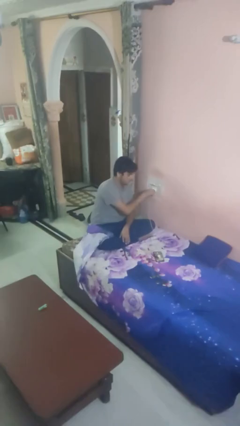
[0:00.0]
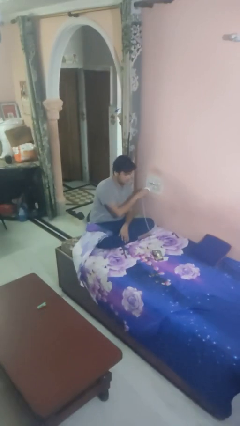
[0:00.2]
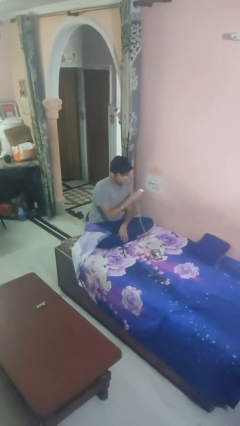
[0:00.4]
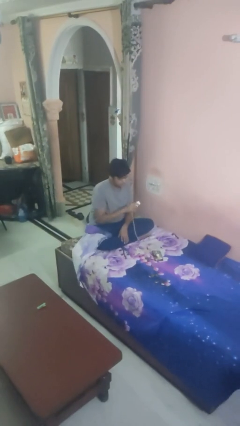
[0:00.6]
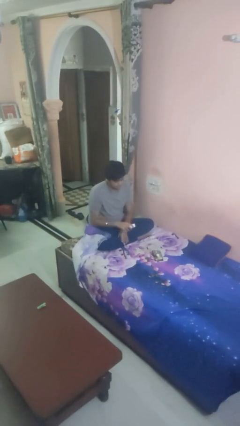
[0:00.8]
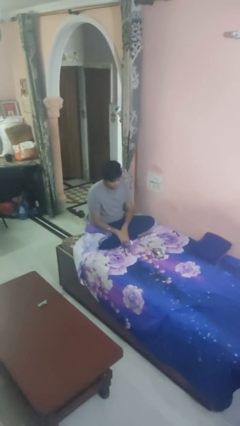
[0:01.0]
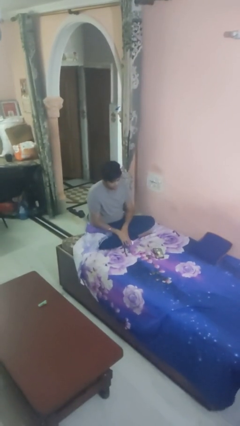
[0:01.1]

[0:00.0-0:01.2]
person unplugs from electrical socket

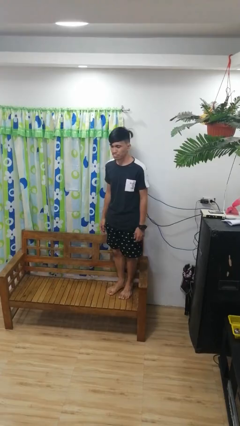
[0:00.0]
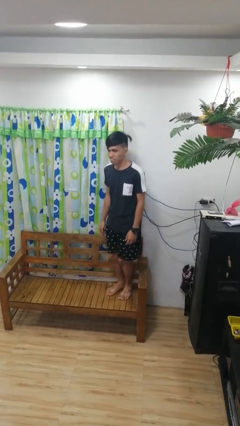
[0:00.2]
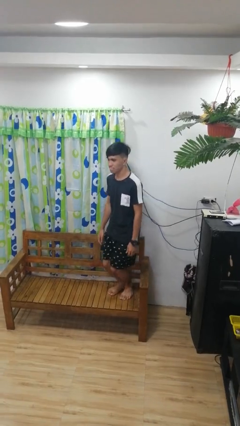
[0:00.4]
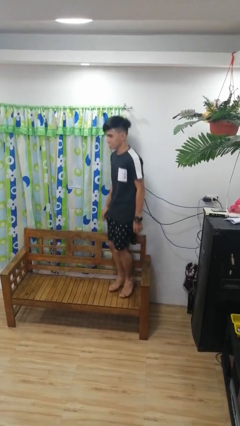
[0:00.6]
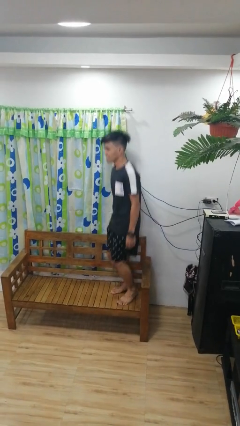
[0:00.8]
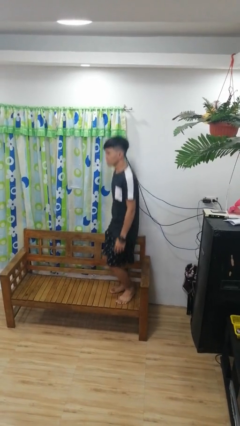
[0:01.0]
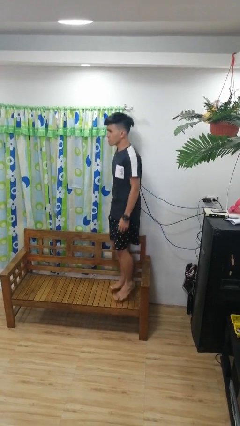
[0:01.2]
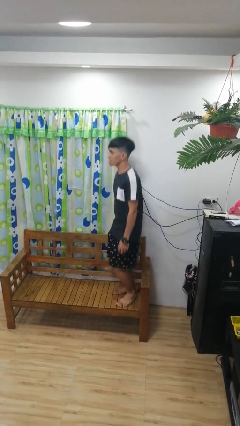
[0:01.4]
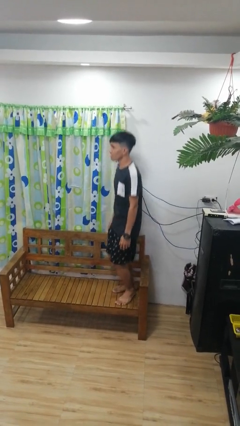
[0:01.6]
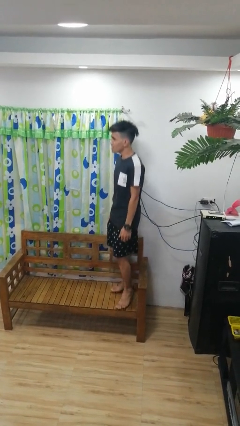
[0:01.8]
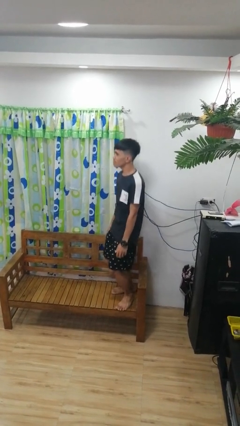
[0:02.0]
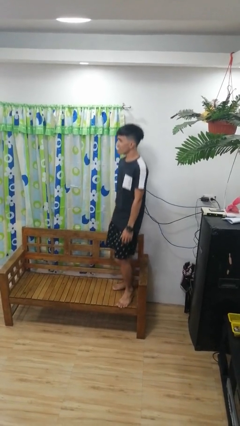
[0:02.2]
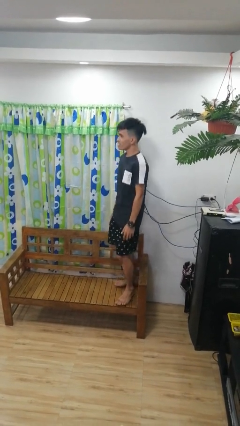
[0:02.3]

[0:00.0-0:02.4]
person jumps on couch

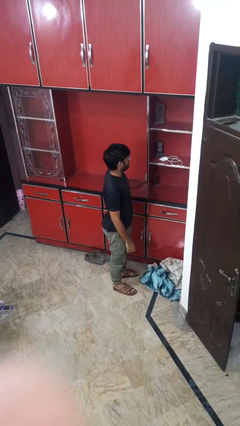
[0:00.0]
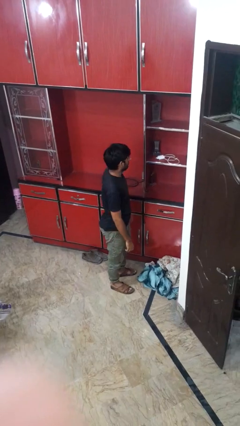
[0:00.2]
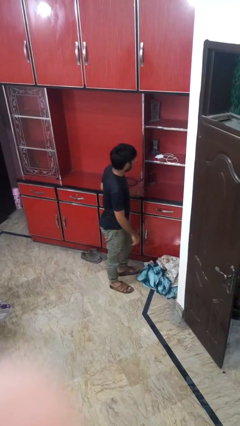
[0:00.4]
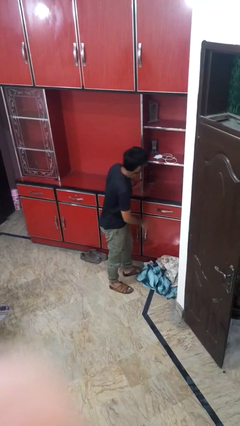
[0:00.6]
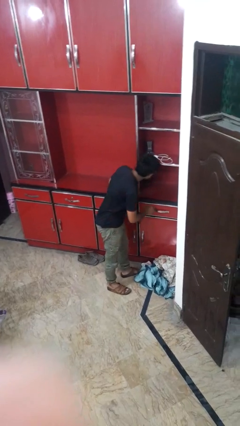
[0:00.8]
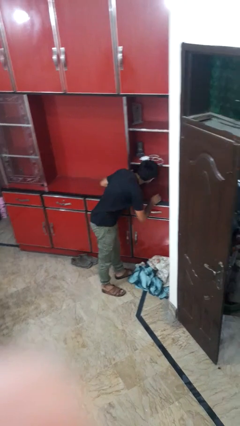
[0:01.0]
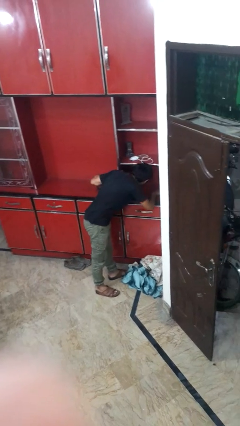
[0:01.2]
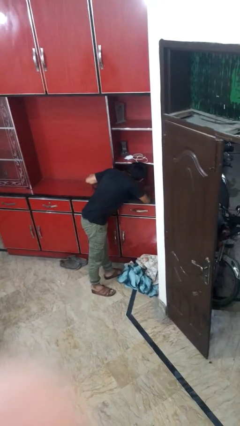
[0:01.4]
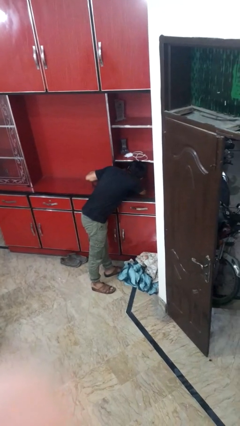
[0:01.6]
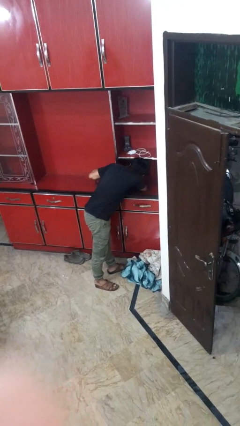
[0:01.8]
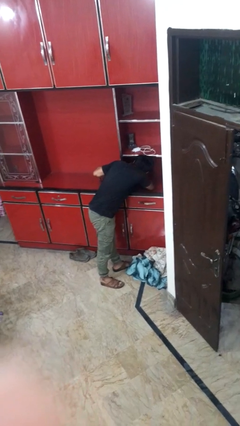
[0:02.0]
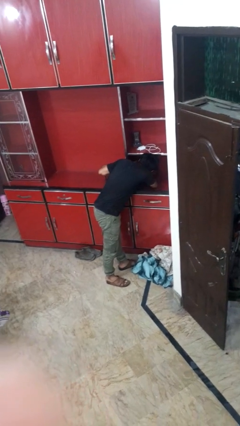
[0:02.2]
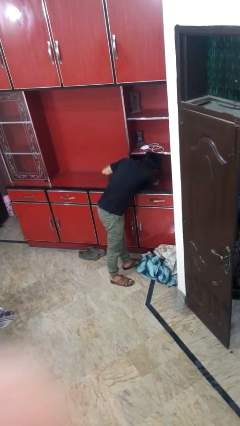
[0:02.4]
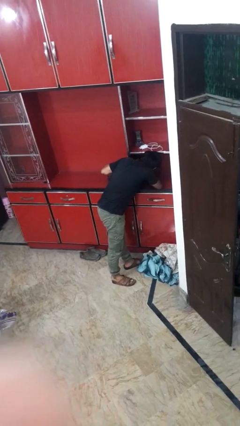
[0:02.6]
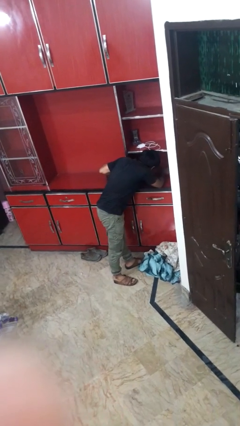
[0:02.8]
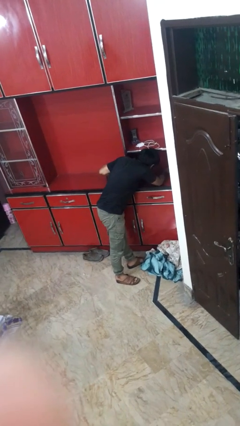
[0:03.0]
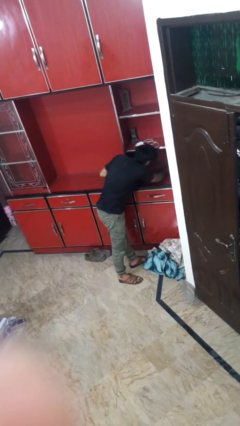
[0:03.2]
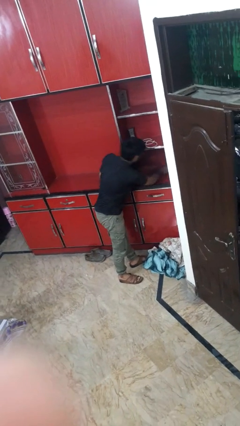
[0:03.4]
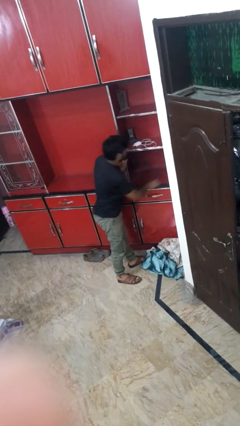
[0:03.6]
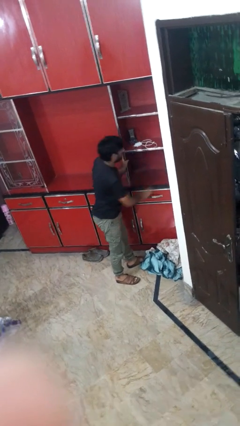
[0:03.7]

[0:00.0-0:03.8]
person searches in cabinet

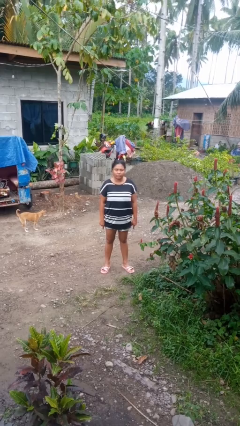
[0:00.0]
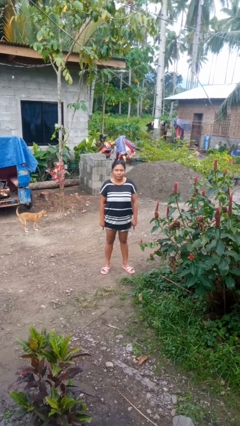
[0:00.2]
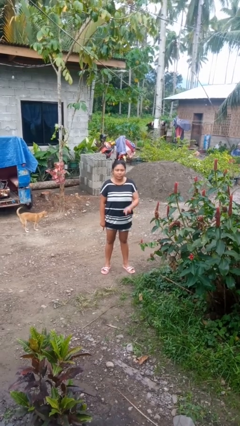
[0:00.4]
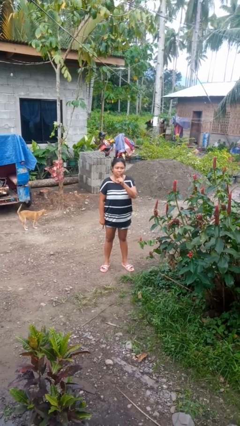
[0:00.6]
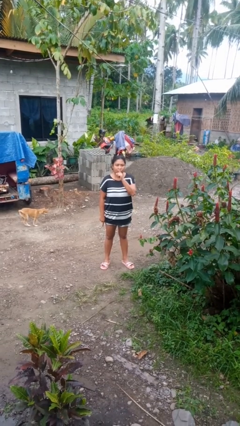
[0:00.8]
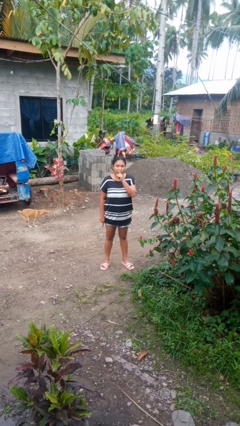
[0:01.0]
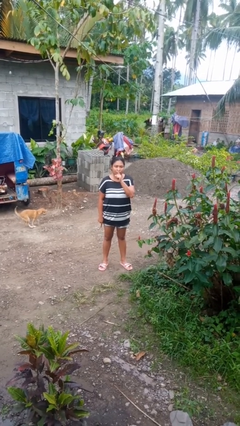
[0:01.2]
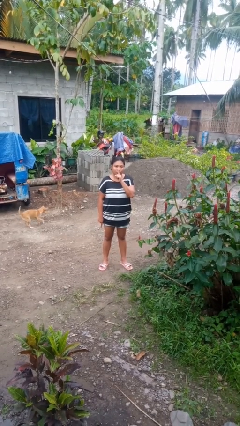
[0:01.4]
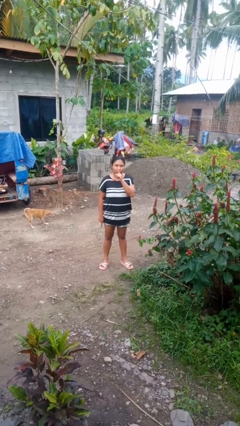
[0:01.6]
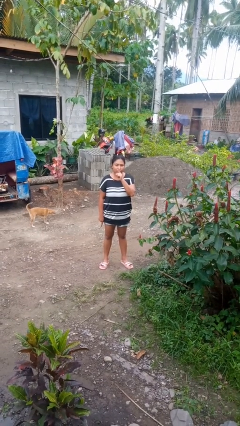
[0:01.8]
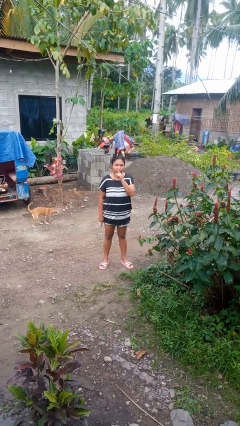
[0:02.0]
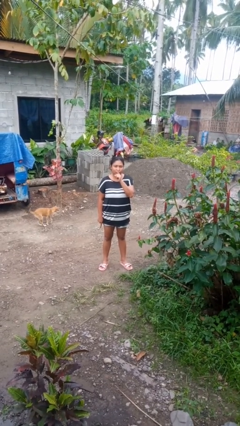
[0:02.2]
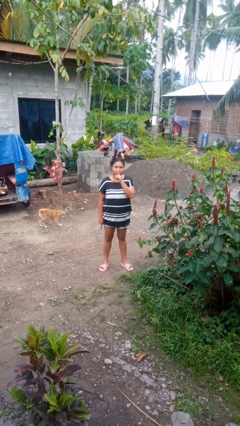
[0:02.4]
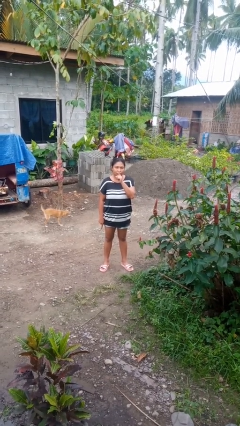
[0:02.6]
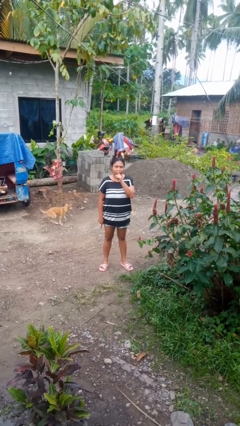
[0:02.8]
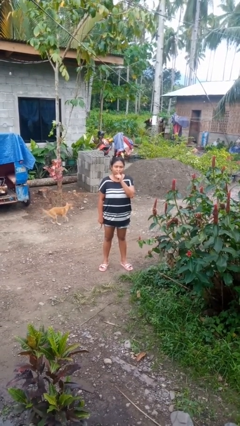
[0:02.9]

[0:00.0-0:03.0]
person gestures be quiet

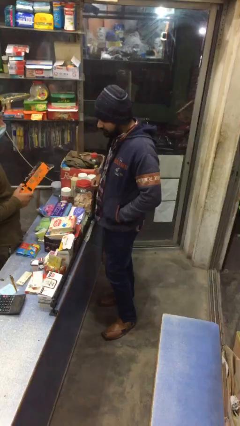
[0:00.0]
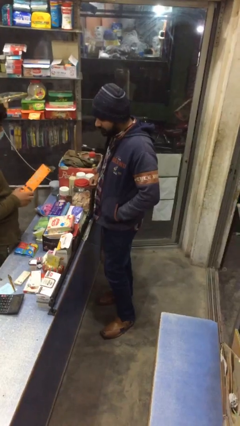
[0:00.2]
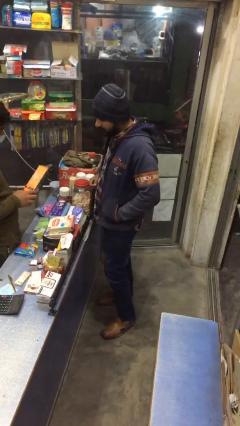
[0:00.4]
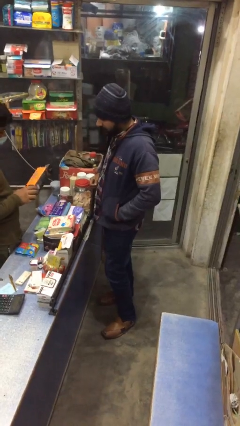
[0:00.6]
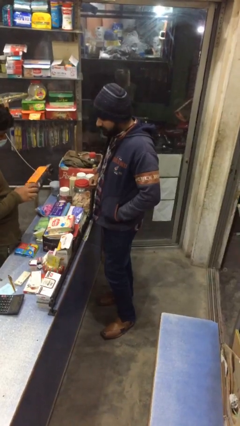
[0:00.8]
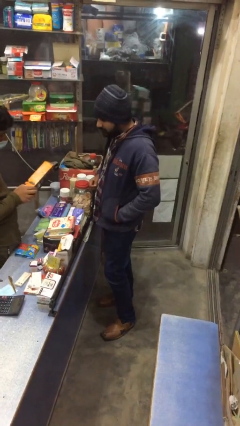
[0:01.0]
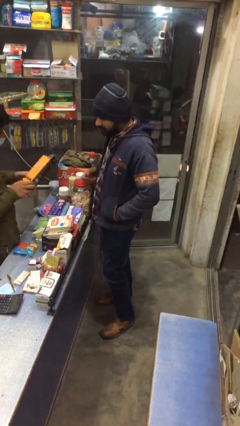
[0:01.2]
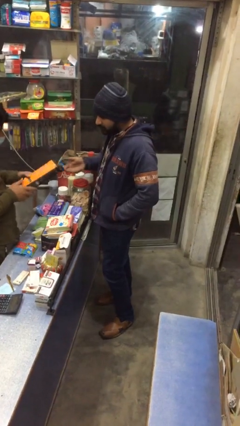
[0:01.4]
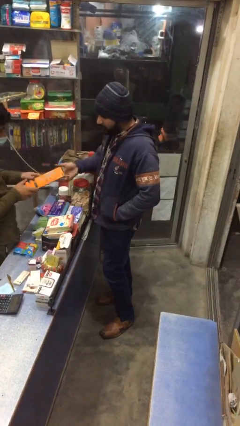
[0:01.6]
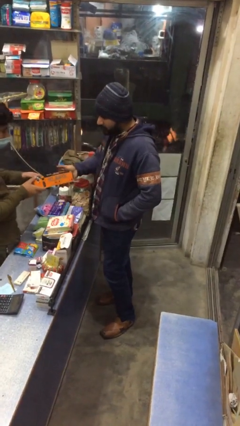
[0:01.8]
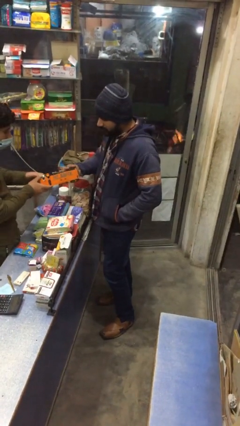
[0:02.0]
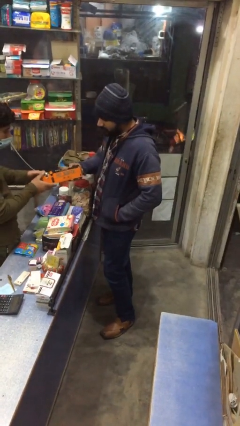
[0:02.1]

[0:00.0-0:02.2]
person transfers object to person

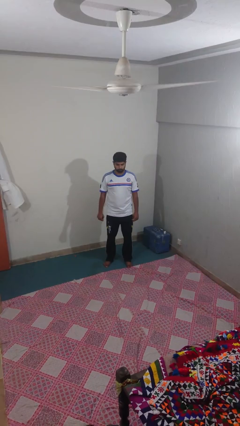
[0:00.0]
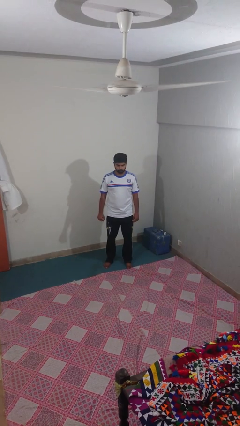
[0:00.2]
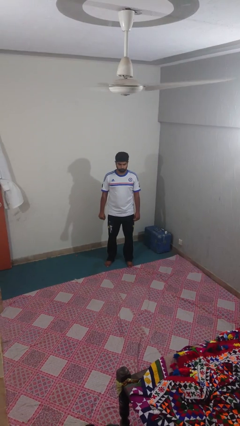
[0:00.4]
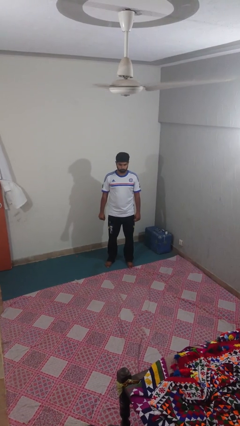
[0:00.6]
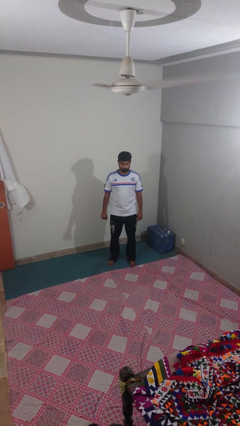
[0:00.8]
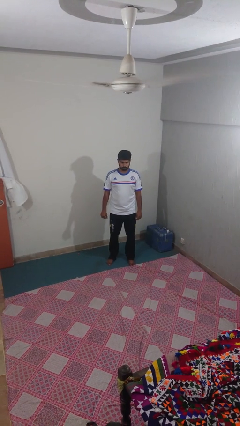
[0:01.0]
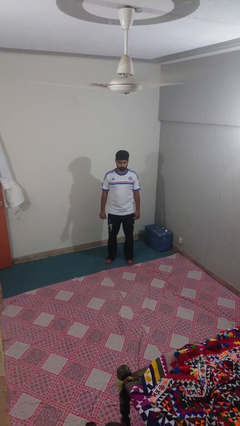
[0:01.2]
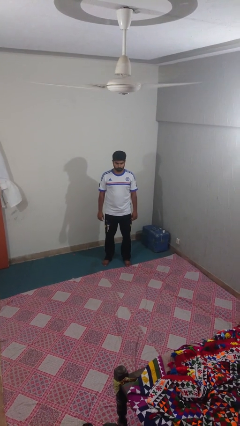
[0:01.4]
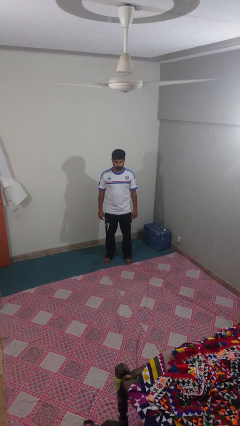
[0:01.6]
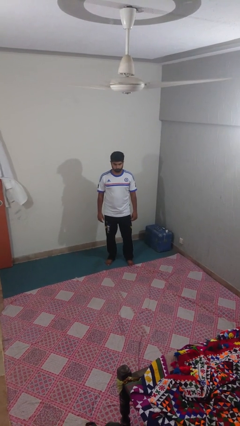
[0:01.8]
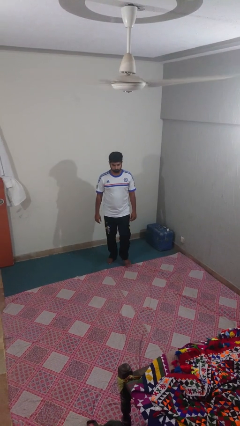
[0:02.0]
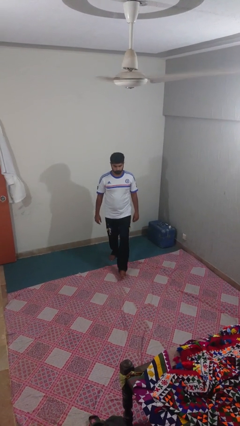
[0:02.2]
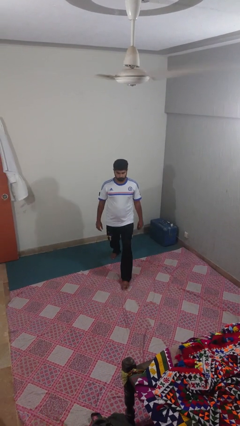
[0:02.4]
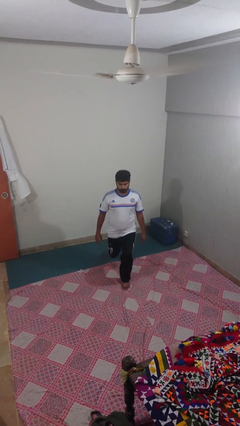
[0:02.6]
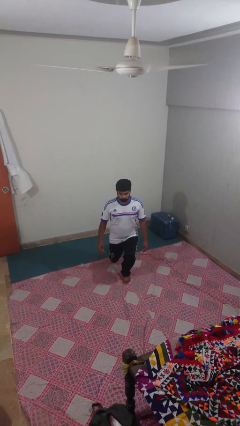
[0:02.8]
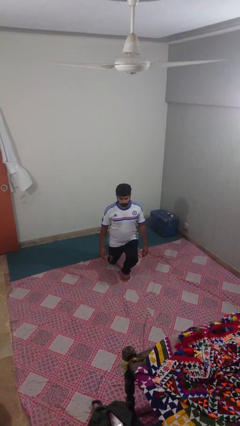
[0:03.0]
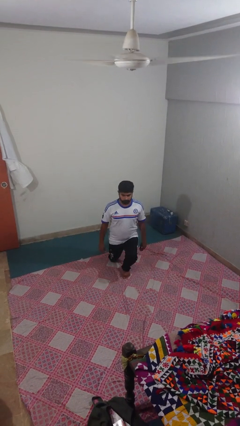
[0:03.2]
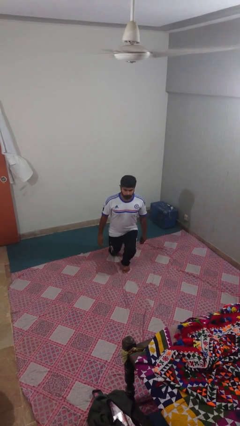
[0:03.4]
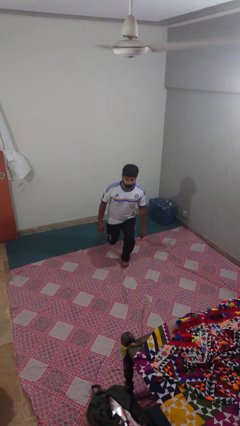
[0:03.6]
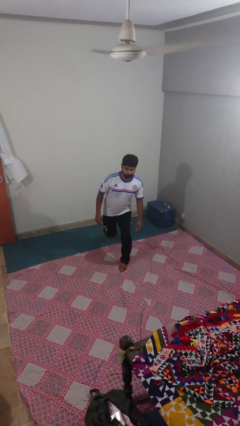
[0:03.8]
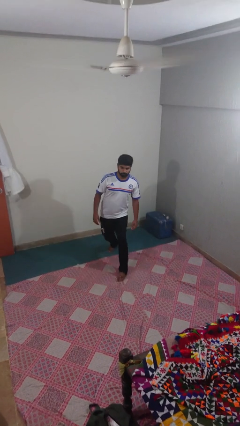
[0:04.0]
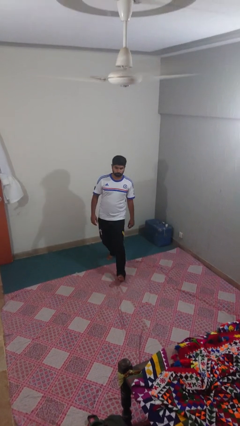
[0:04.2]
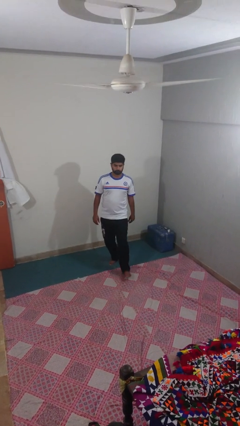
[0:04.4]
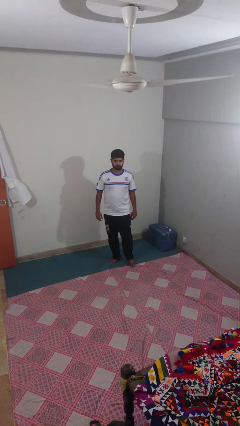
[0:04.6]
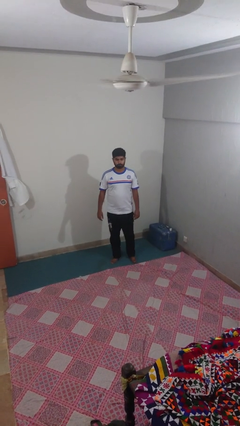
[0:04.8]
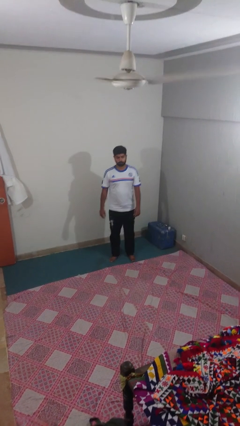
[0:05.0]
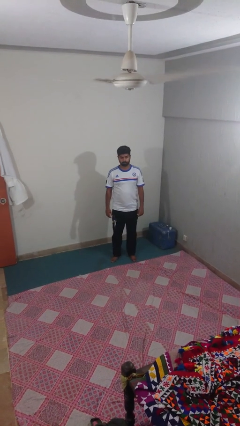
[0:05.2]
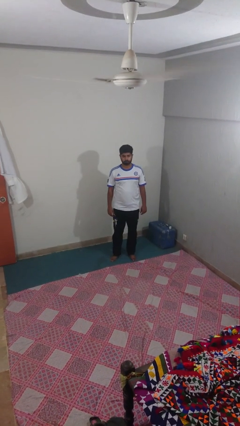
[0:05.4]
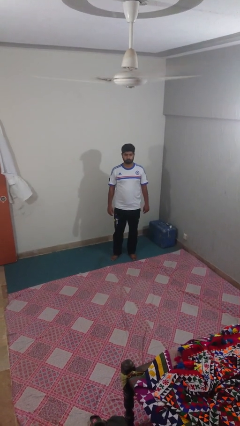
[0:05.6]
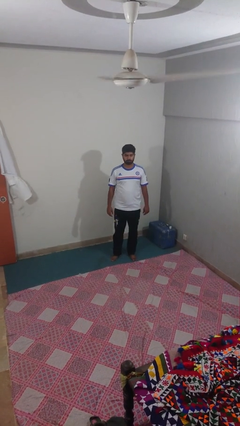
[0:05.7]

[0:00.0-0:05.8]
person exercises with lunges
